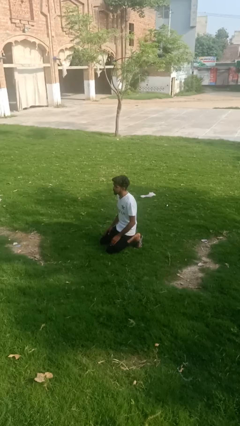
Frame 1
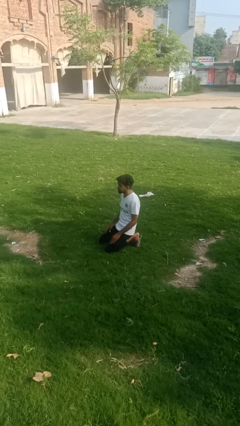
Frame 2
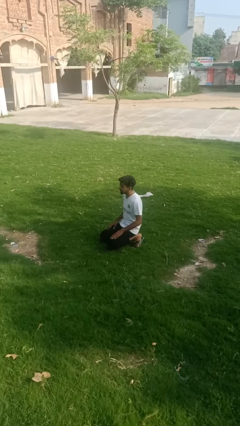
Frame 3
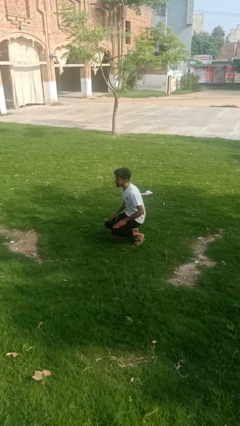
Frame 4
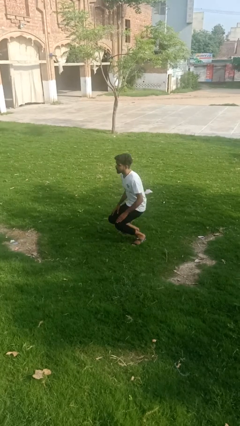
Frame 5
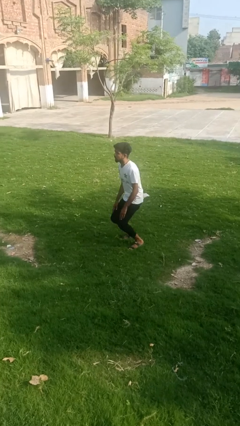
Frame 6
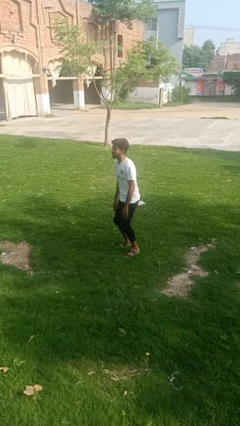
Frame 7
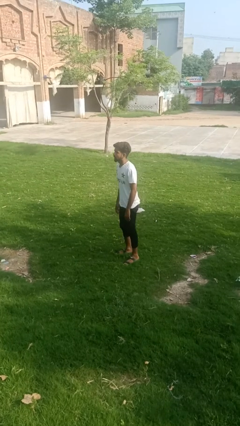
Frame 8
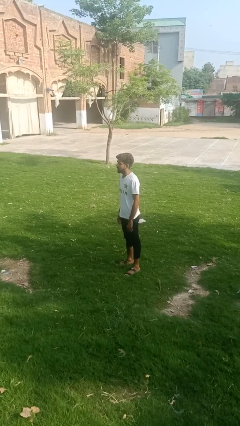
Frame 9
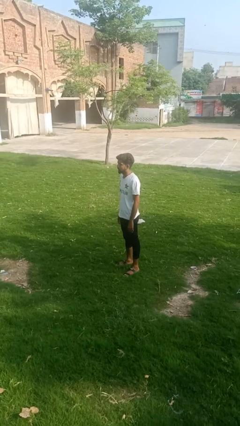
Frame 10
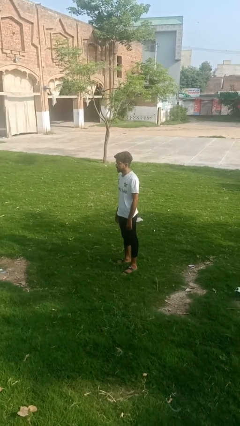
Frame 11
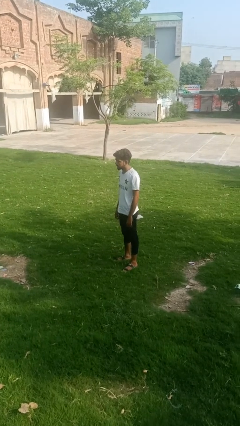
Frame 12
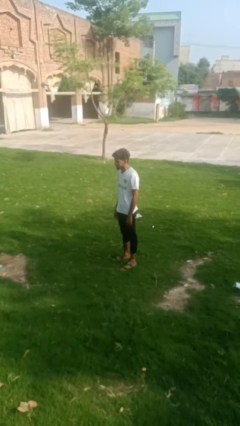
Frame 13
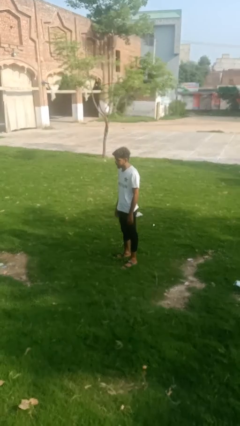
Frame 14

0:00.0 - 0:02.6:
person stands up from floor

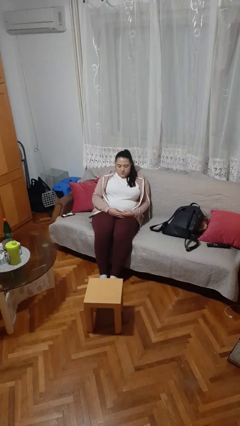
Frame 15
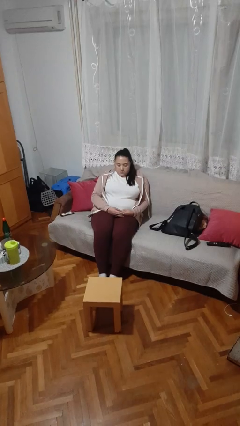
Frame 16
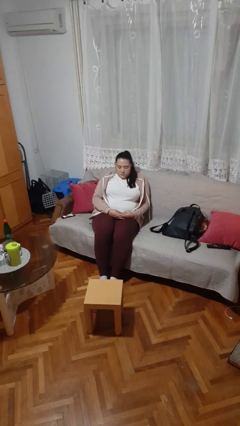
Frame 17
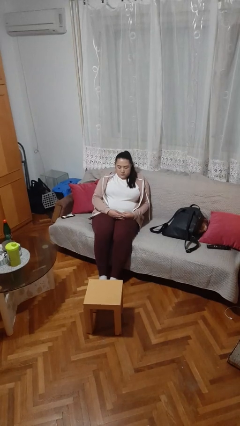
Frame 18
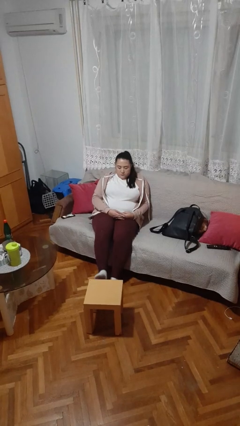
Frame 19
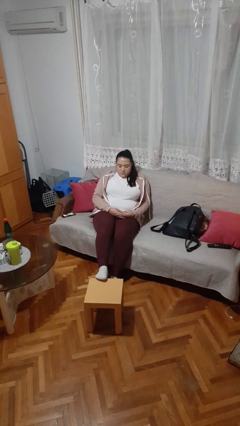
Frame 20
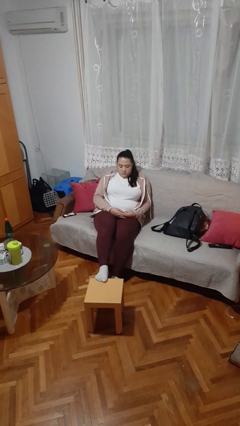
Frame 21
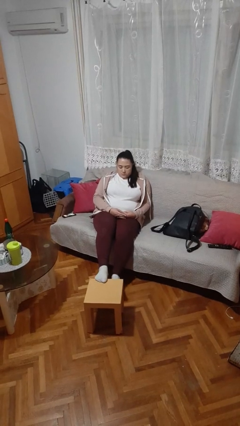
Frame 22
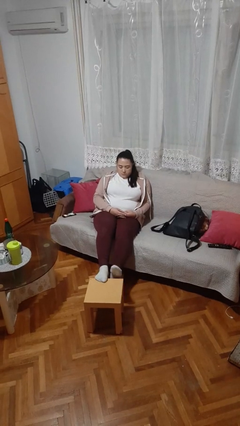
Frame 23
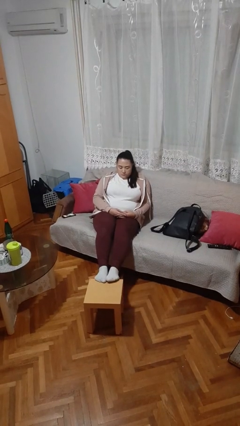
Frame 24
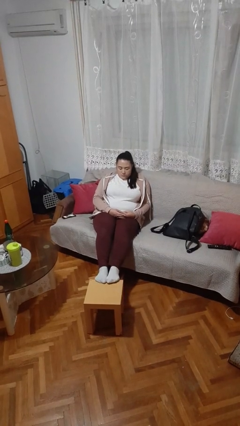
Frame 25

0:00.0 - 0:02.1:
person puts feet up

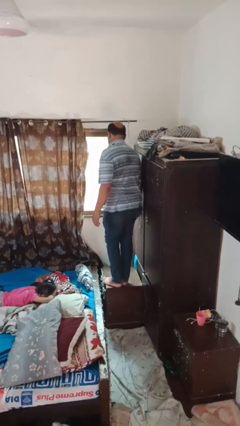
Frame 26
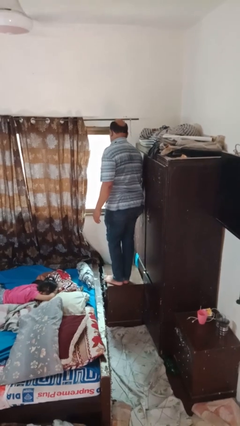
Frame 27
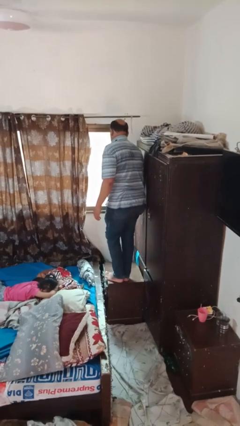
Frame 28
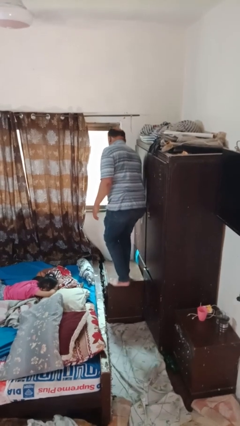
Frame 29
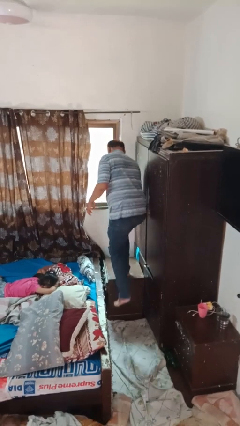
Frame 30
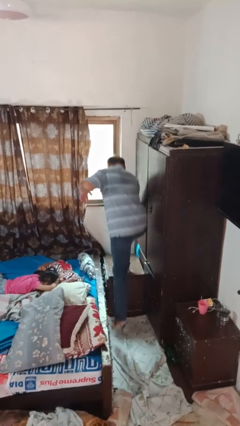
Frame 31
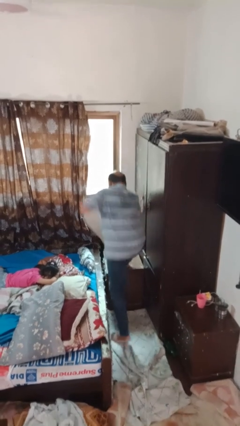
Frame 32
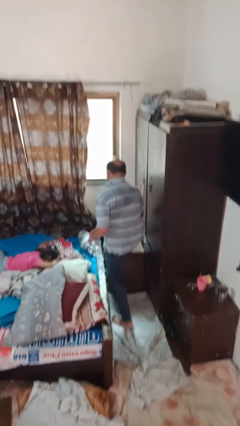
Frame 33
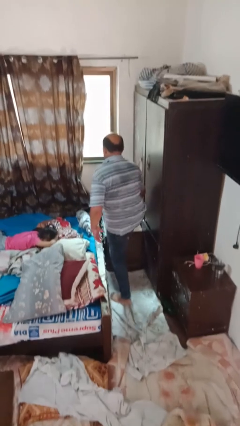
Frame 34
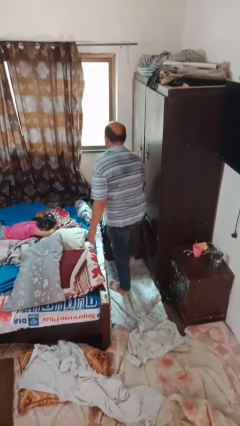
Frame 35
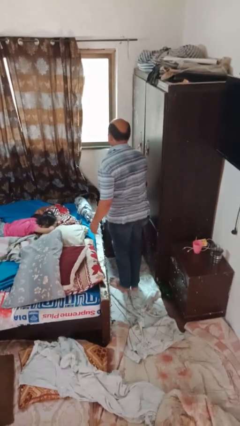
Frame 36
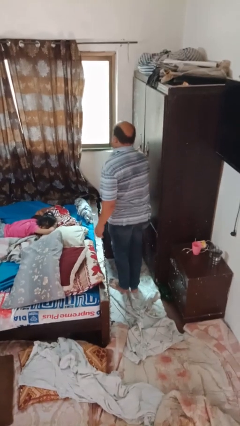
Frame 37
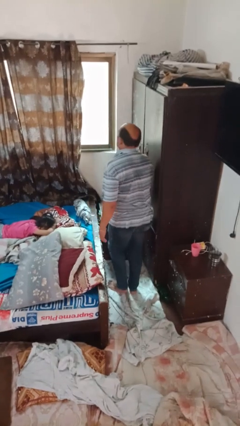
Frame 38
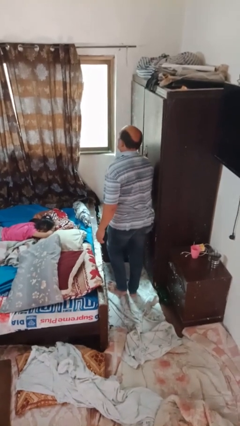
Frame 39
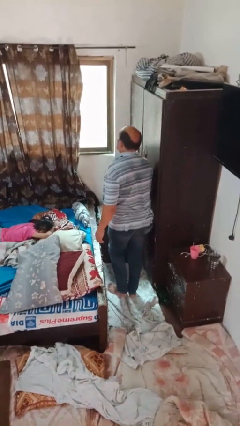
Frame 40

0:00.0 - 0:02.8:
person climbs off table

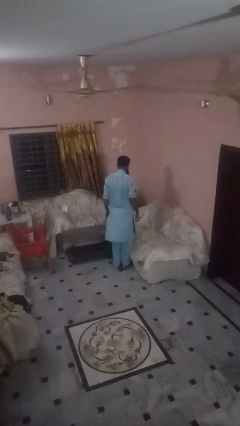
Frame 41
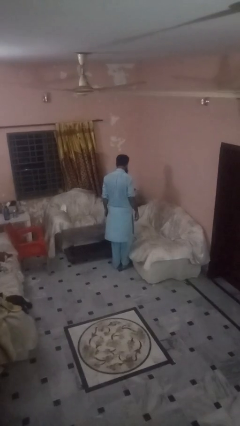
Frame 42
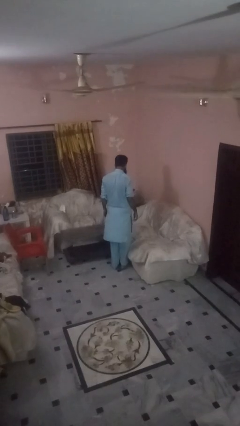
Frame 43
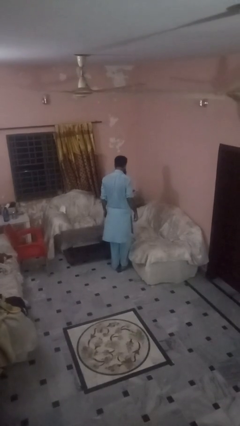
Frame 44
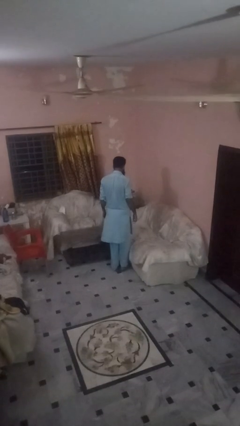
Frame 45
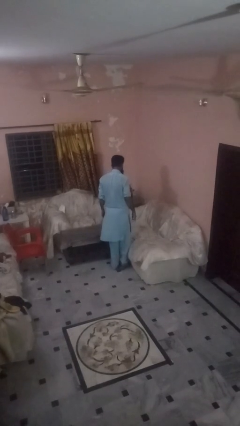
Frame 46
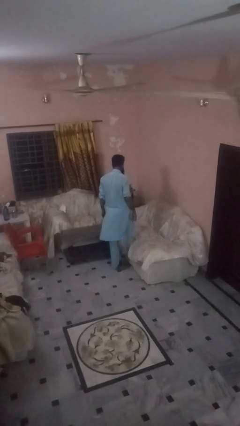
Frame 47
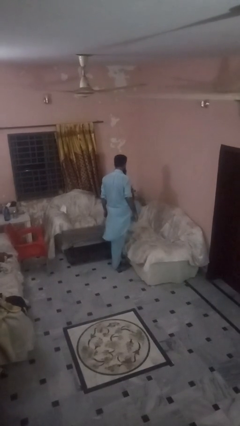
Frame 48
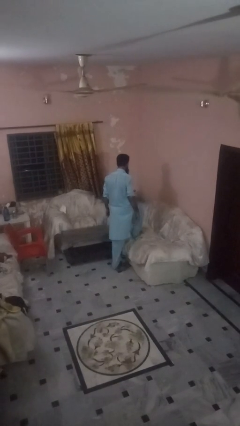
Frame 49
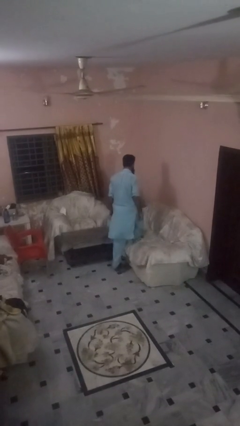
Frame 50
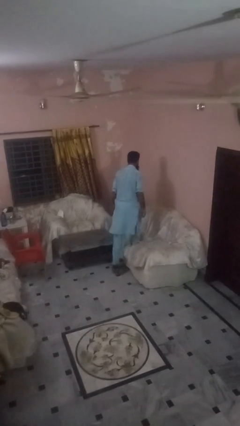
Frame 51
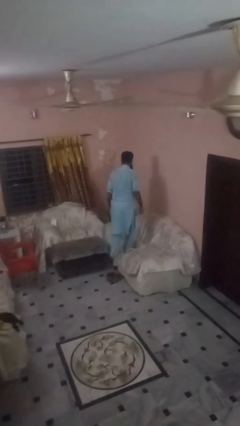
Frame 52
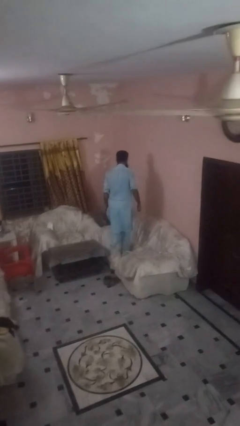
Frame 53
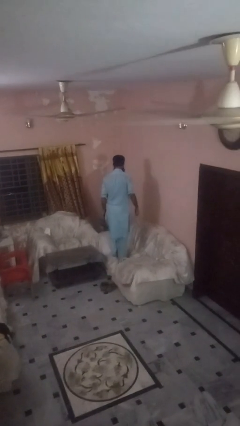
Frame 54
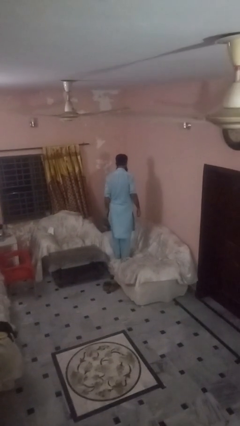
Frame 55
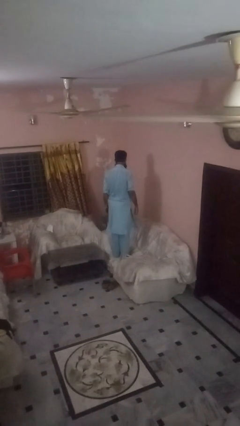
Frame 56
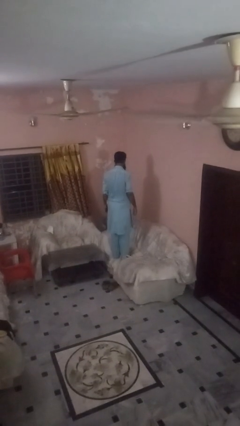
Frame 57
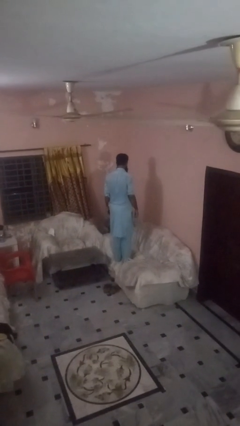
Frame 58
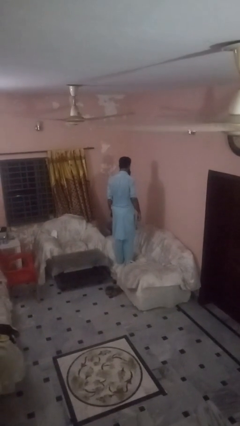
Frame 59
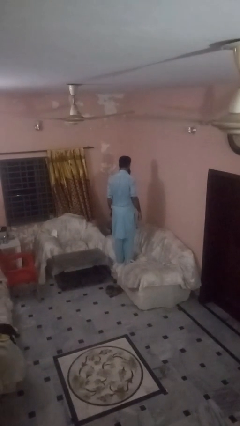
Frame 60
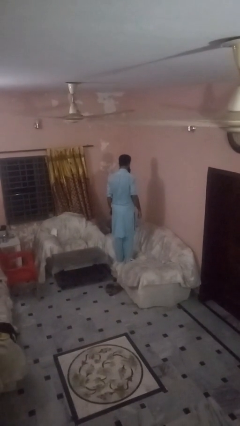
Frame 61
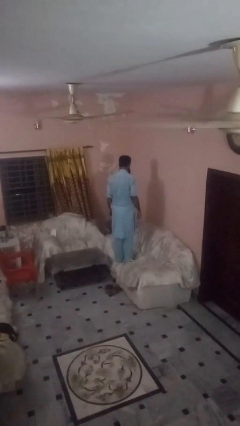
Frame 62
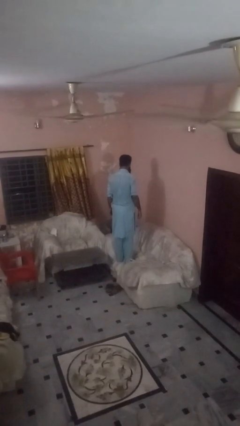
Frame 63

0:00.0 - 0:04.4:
person climbs on couch

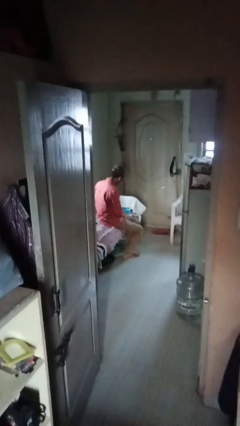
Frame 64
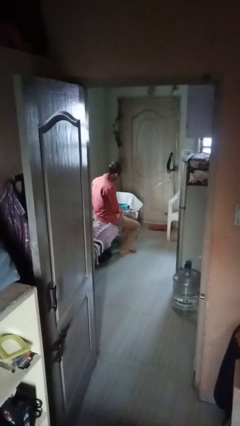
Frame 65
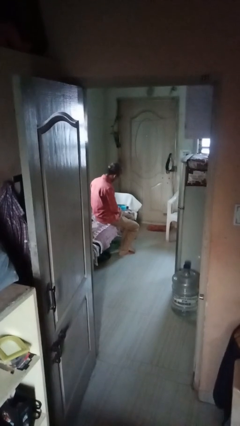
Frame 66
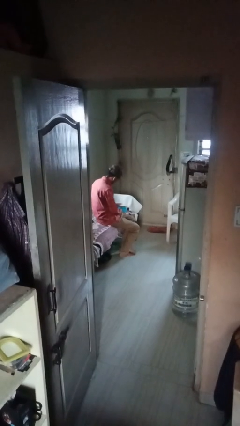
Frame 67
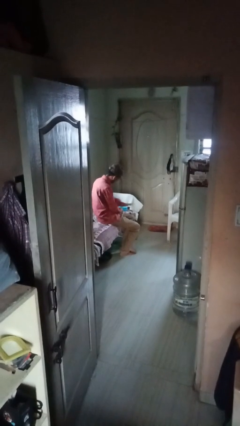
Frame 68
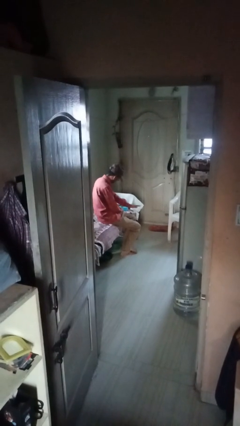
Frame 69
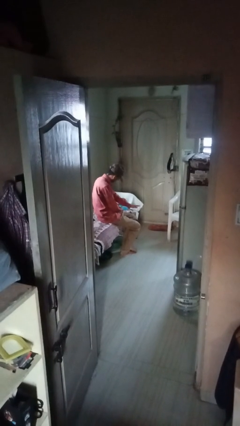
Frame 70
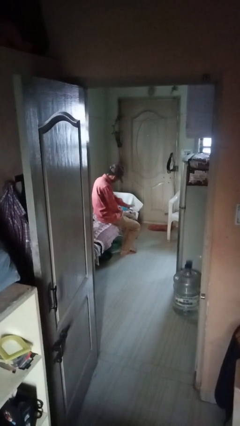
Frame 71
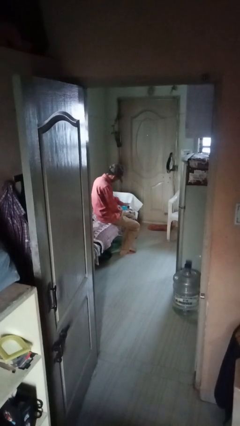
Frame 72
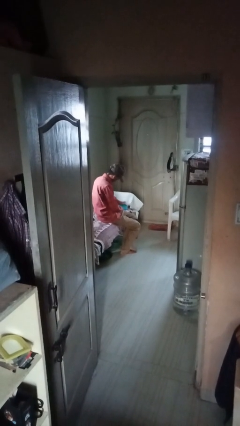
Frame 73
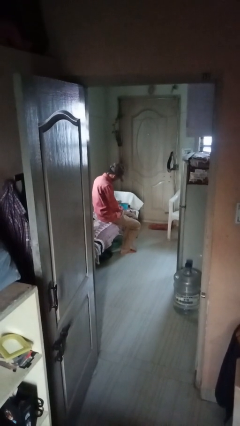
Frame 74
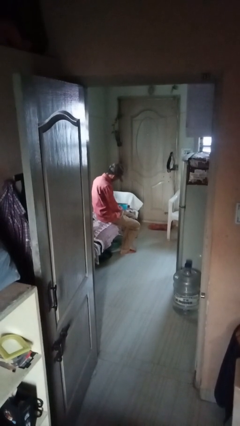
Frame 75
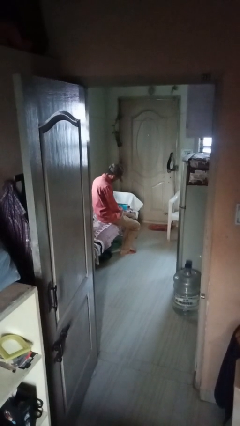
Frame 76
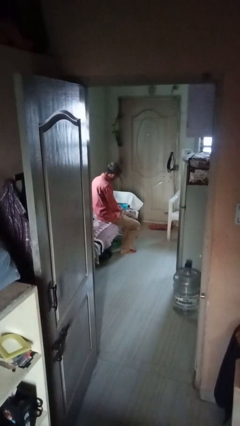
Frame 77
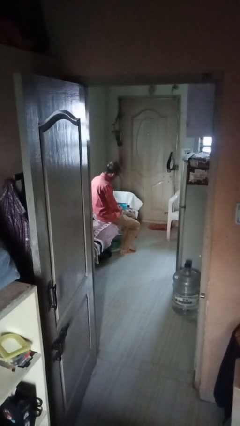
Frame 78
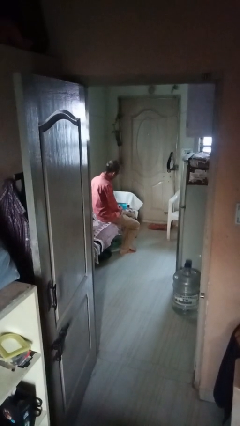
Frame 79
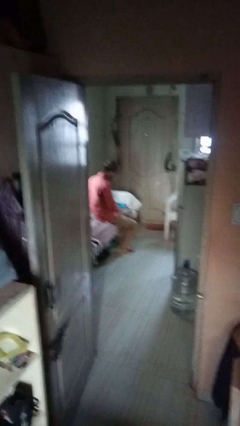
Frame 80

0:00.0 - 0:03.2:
person waves hand over object

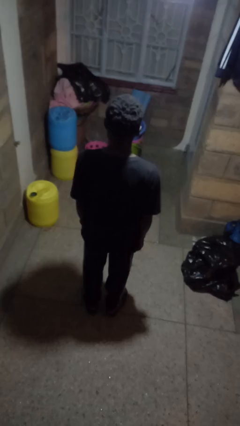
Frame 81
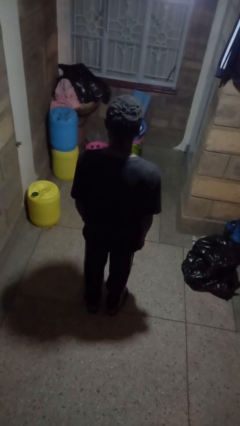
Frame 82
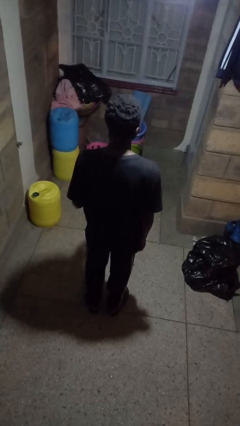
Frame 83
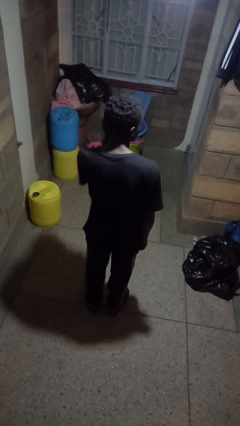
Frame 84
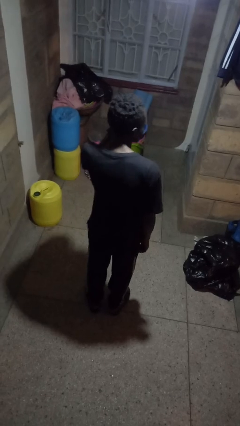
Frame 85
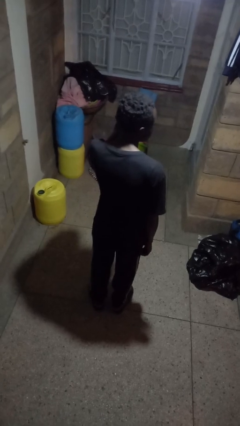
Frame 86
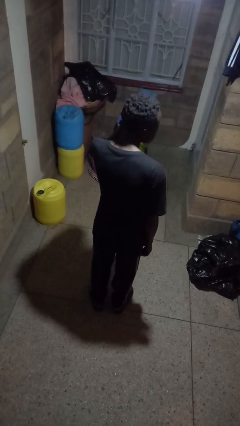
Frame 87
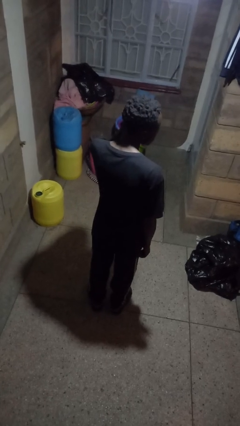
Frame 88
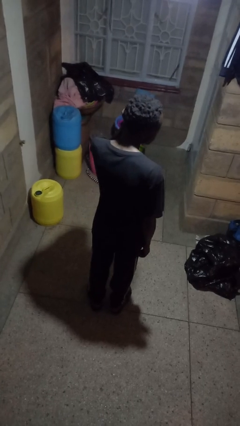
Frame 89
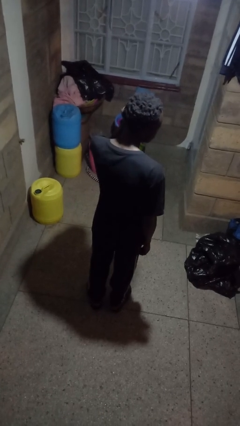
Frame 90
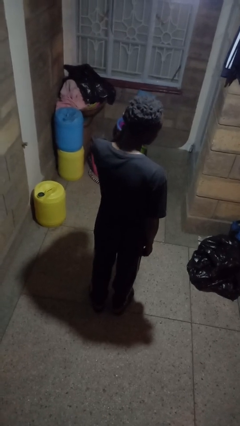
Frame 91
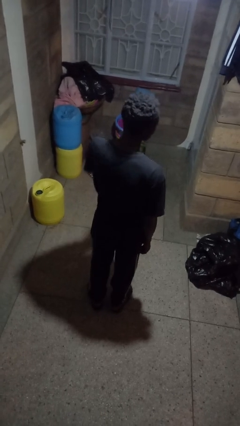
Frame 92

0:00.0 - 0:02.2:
person touches earlobe

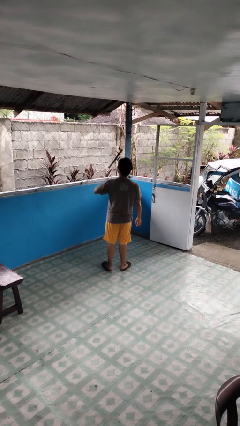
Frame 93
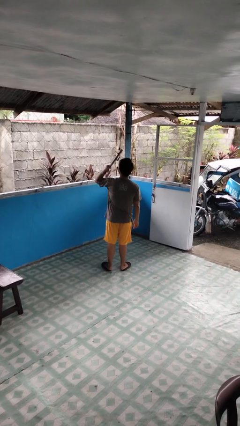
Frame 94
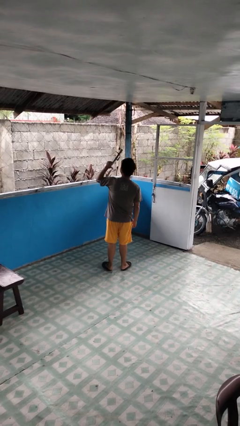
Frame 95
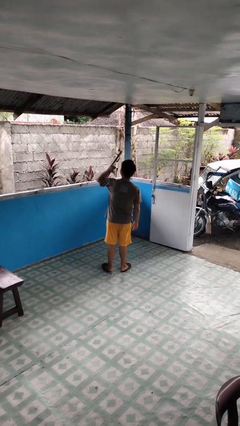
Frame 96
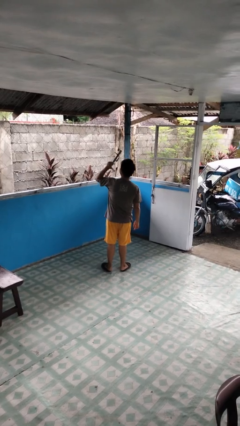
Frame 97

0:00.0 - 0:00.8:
person gestures behind me
